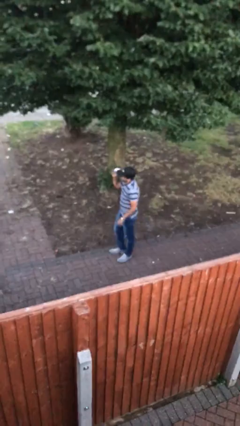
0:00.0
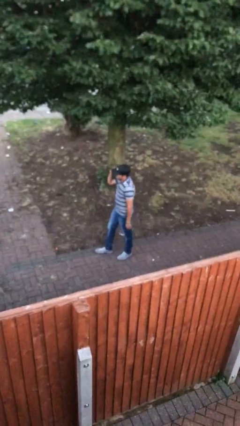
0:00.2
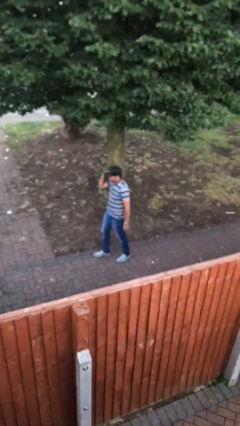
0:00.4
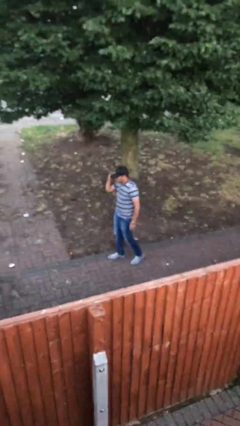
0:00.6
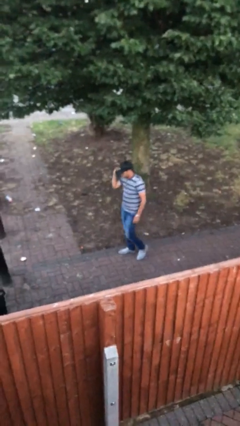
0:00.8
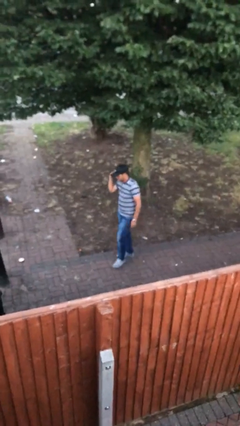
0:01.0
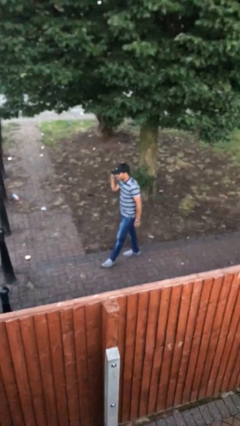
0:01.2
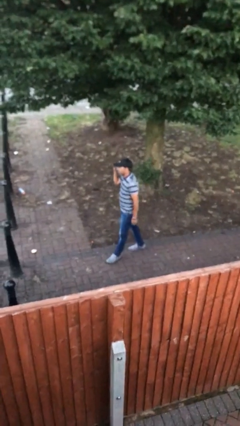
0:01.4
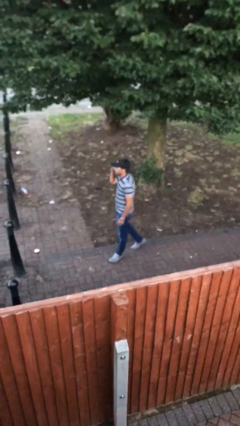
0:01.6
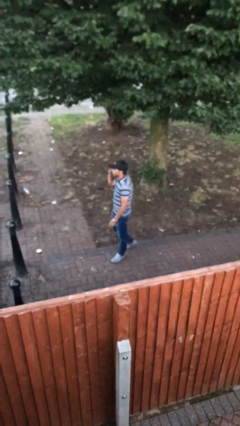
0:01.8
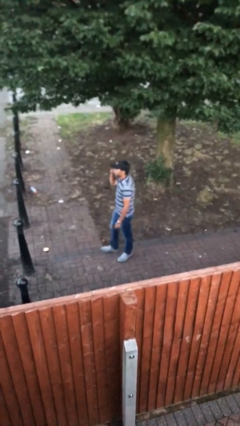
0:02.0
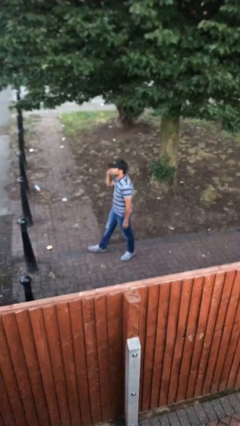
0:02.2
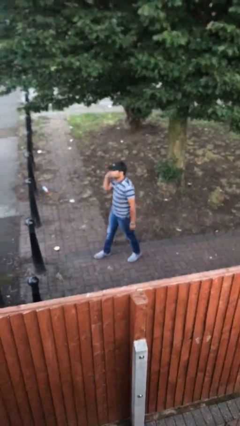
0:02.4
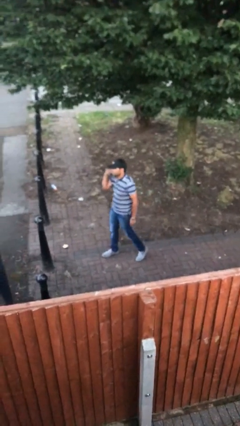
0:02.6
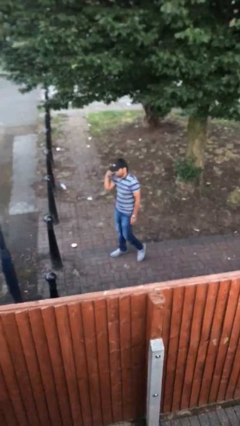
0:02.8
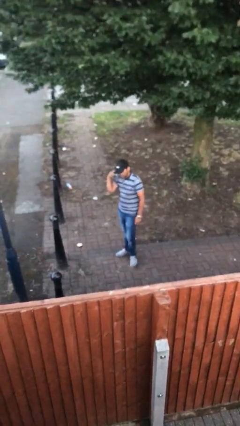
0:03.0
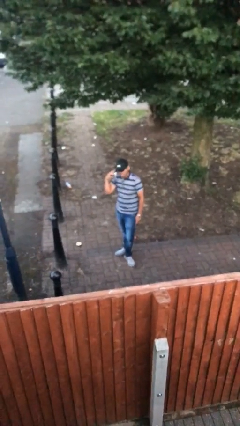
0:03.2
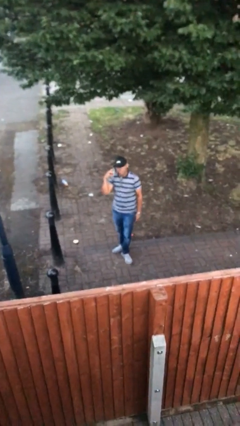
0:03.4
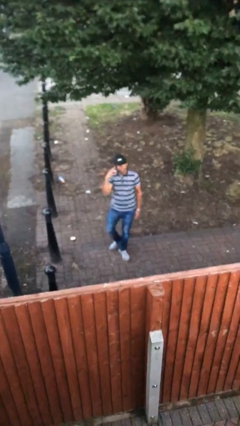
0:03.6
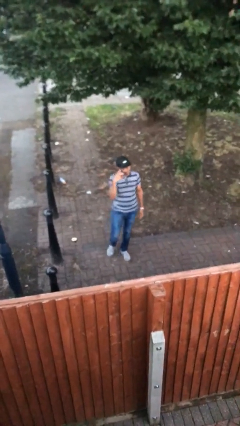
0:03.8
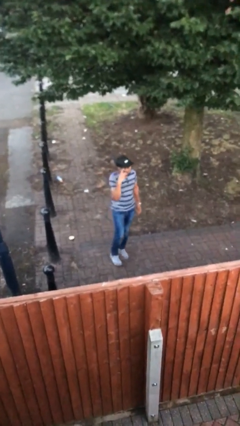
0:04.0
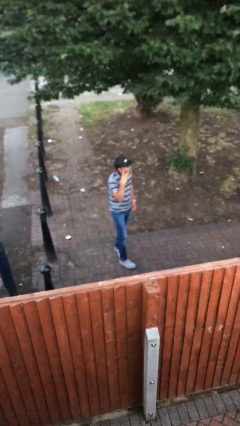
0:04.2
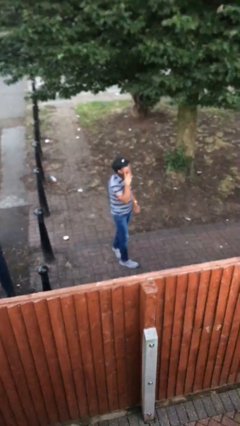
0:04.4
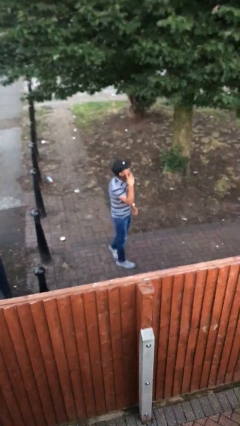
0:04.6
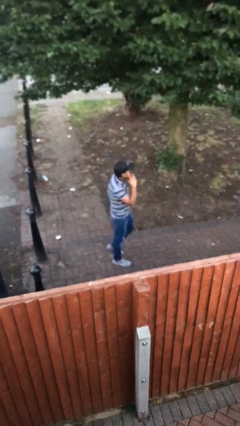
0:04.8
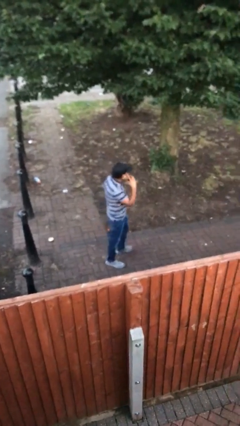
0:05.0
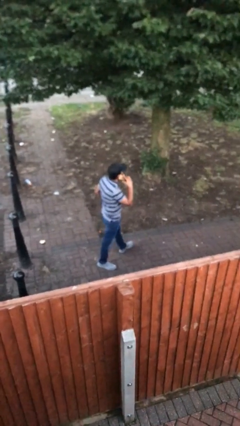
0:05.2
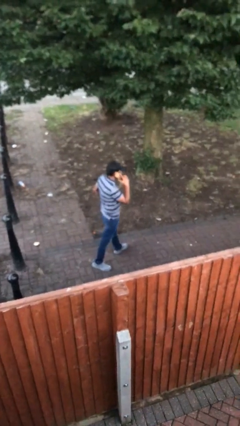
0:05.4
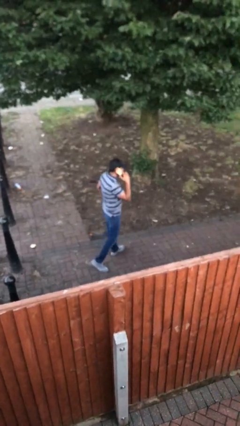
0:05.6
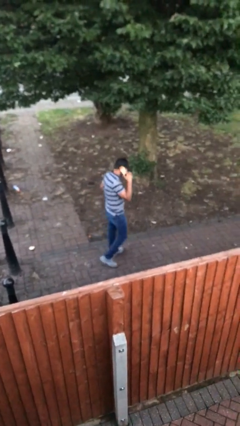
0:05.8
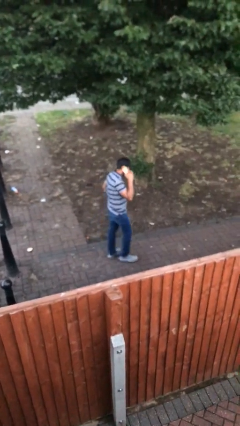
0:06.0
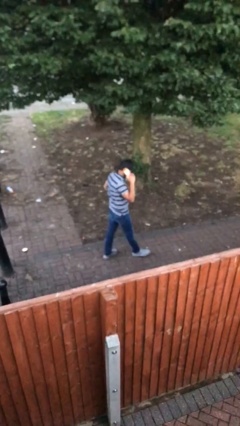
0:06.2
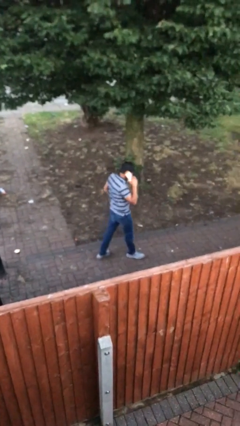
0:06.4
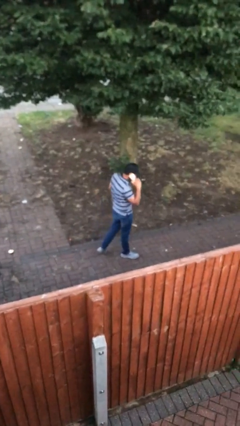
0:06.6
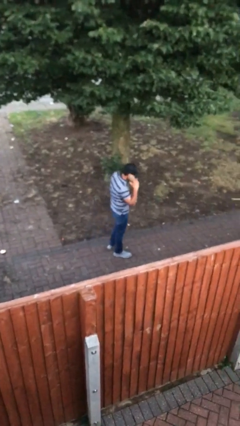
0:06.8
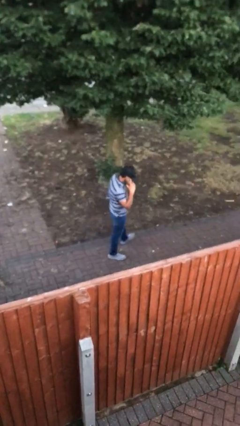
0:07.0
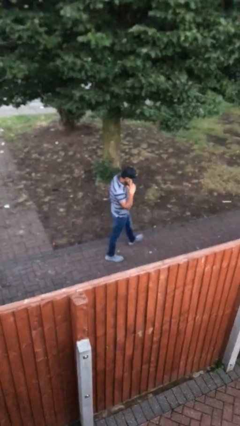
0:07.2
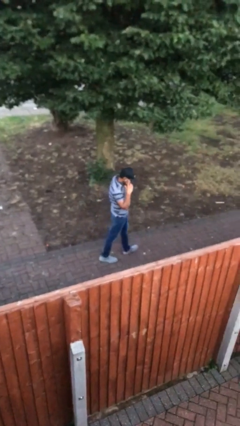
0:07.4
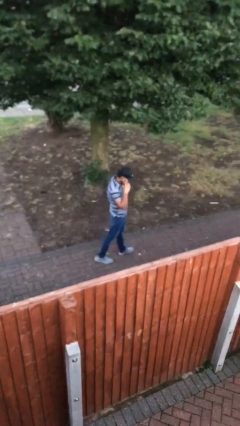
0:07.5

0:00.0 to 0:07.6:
person talks on phone

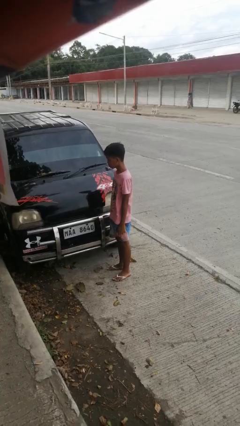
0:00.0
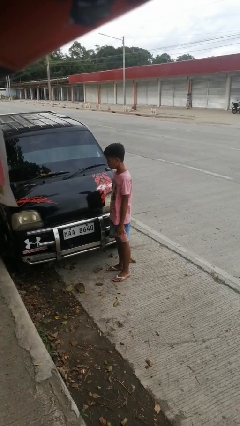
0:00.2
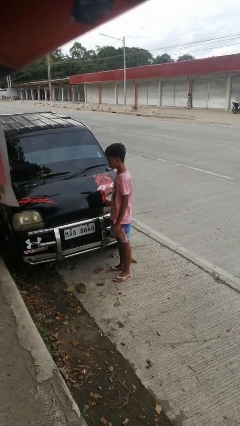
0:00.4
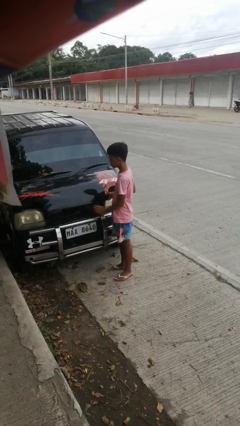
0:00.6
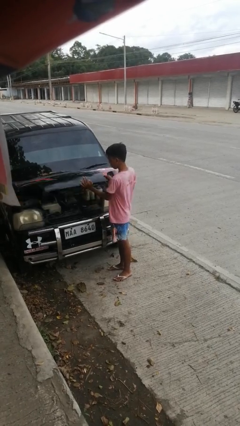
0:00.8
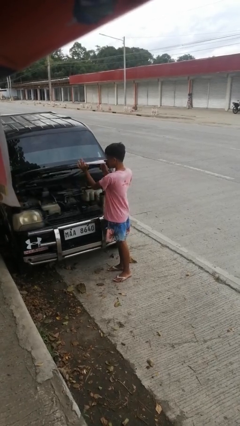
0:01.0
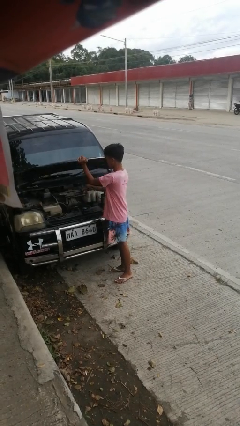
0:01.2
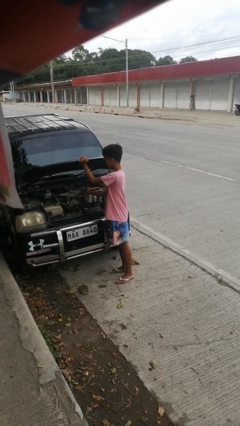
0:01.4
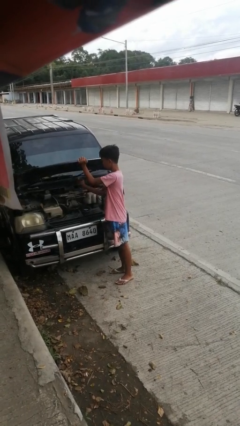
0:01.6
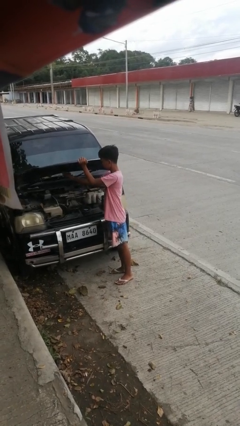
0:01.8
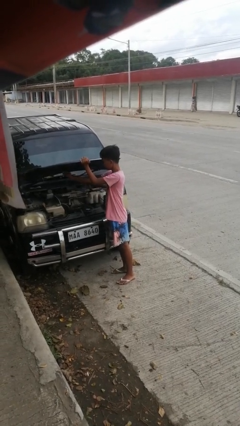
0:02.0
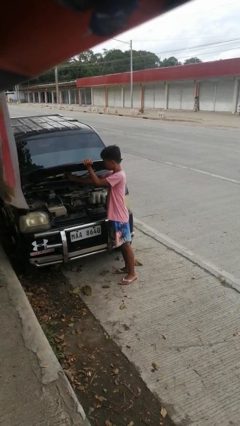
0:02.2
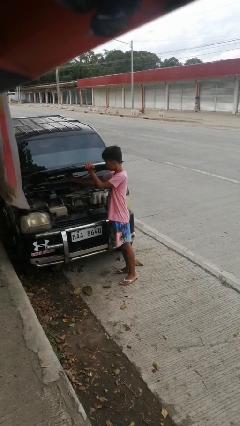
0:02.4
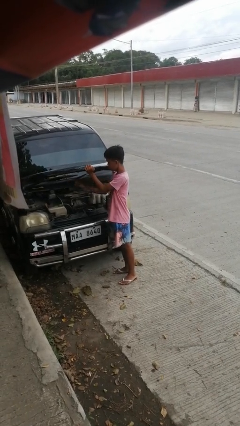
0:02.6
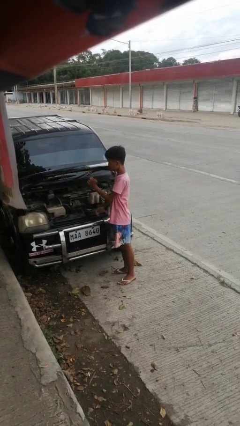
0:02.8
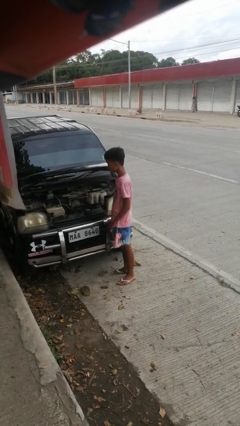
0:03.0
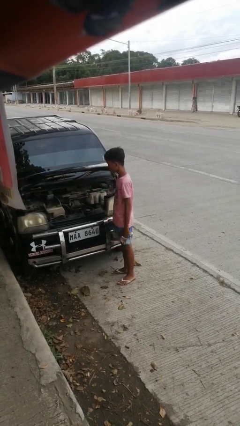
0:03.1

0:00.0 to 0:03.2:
person opens car hood

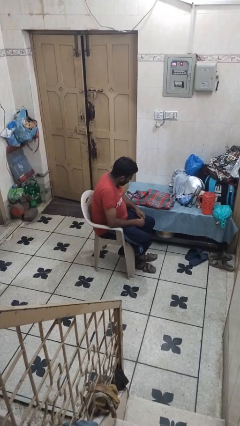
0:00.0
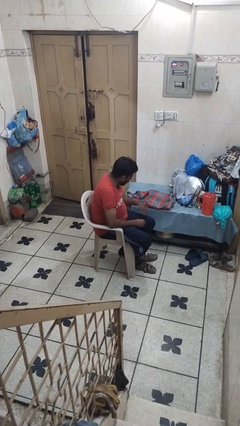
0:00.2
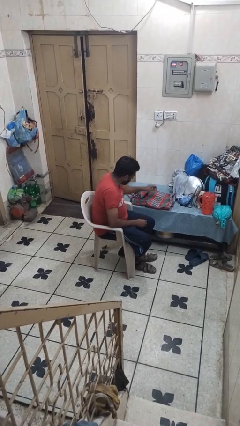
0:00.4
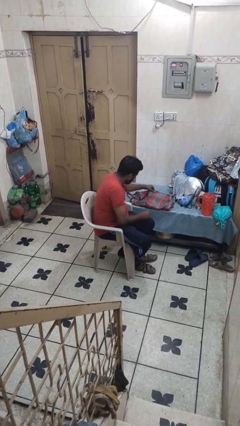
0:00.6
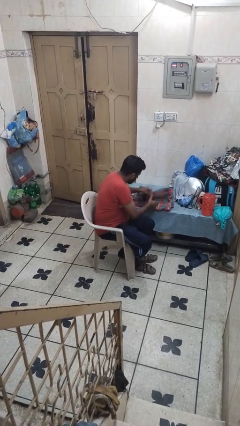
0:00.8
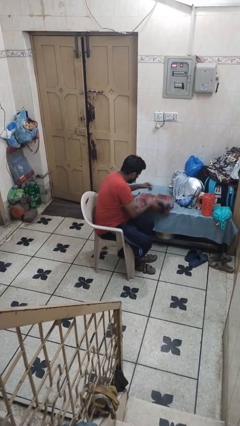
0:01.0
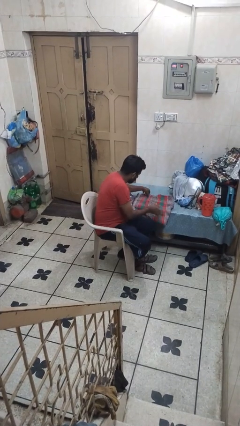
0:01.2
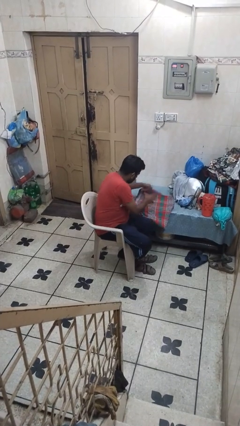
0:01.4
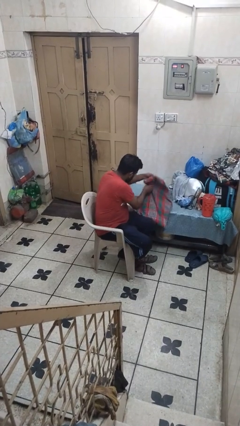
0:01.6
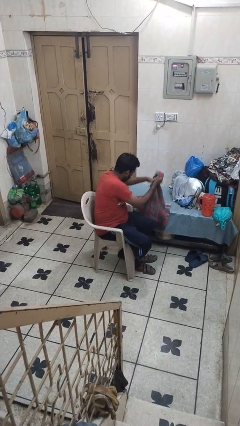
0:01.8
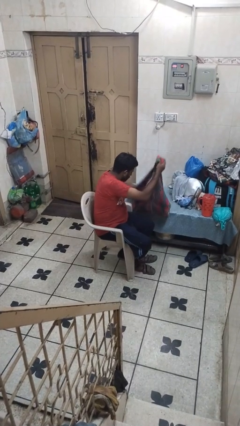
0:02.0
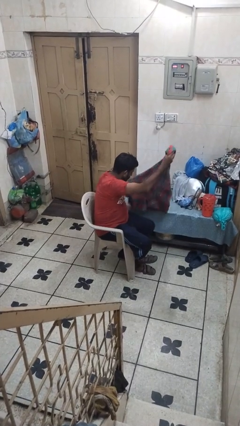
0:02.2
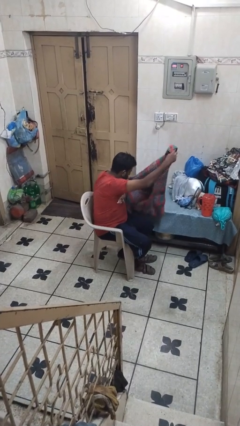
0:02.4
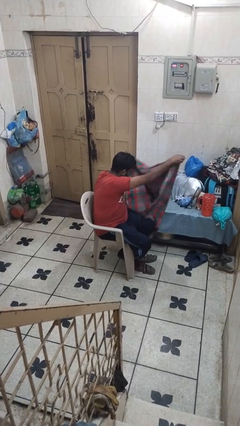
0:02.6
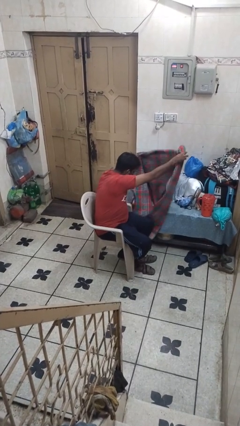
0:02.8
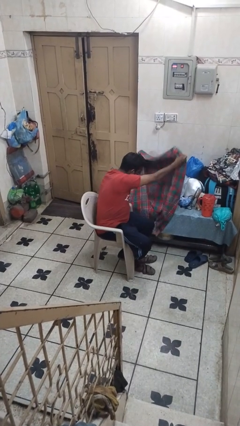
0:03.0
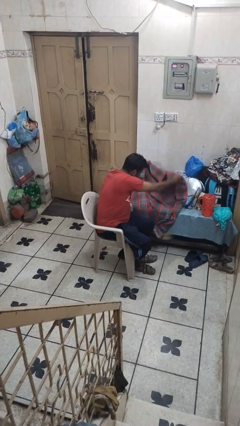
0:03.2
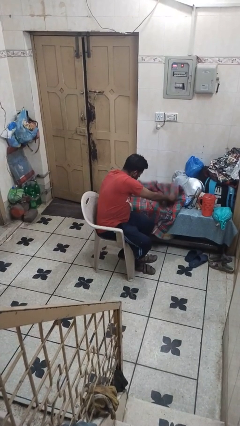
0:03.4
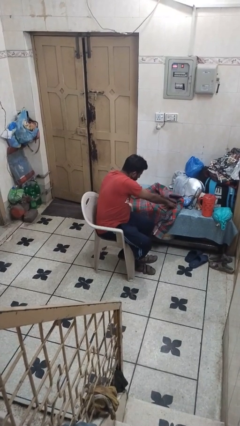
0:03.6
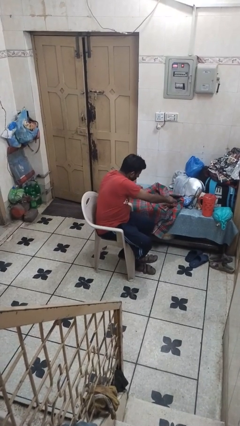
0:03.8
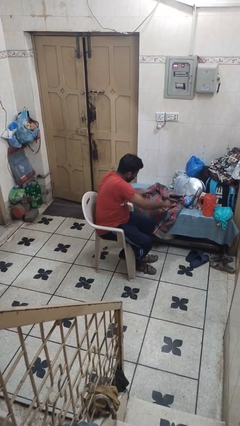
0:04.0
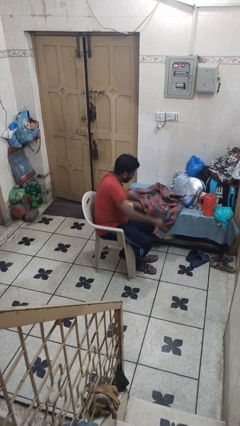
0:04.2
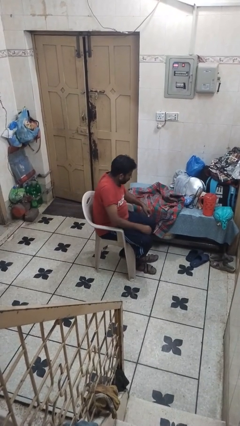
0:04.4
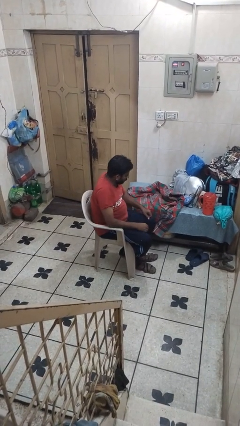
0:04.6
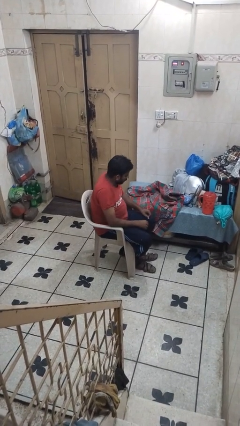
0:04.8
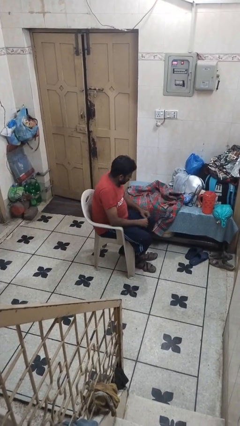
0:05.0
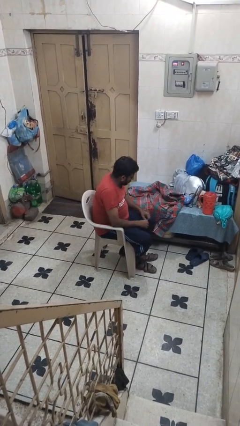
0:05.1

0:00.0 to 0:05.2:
person unfolds blanket

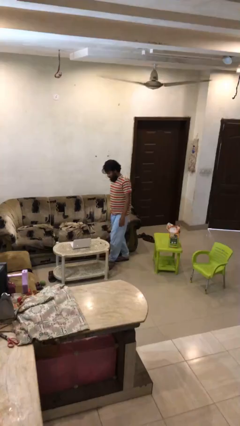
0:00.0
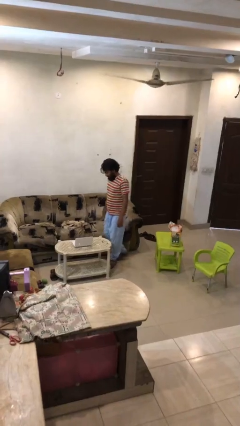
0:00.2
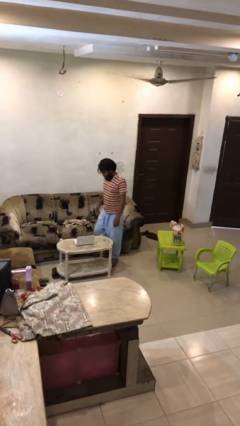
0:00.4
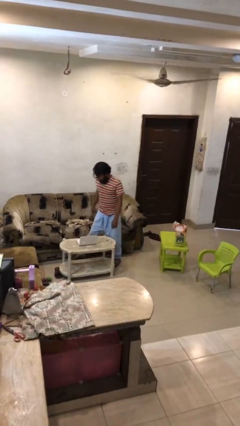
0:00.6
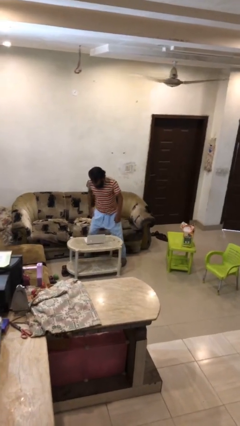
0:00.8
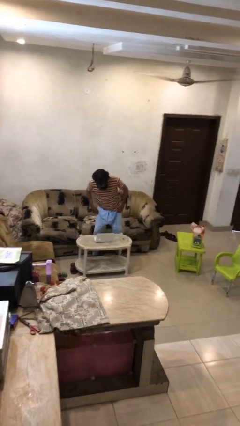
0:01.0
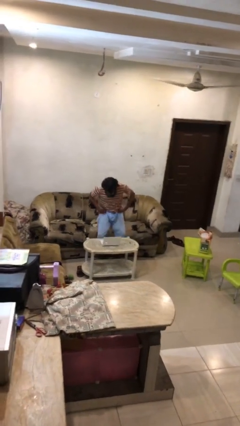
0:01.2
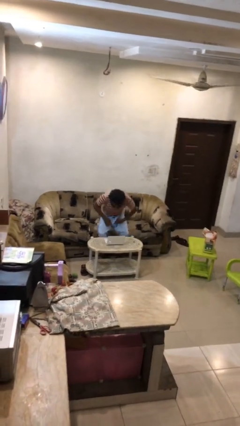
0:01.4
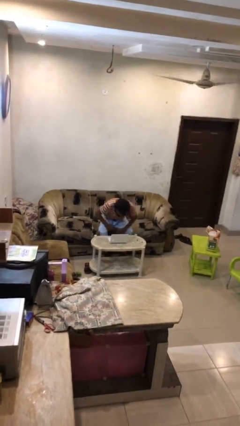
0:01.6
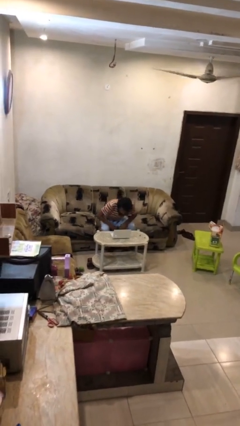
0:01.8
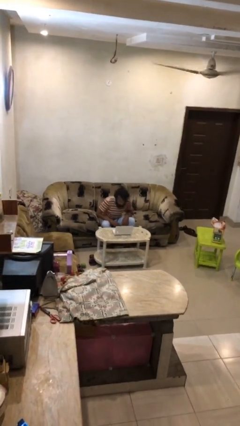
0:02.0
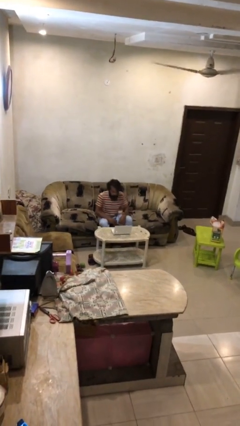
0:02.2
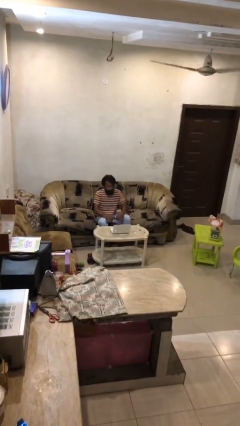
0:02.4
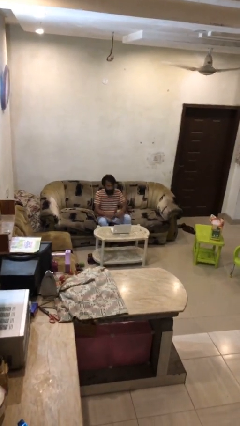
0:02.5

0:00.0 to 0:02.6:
person sits down
